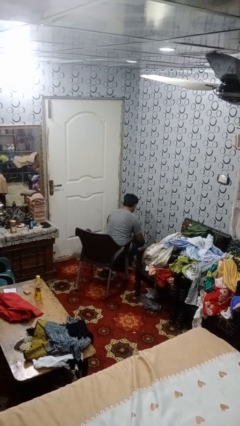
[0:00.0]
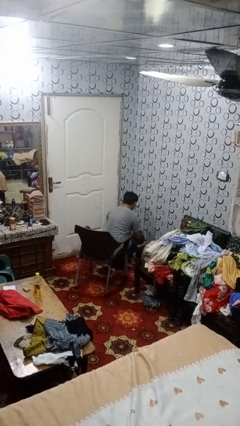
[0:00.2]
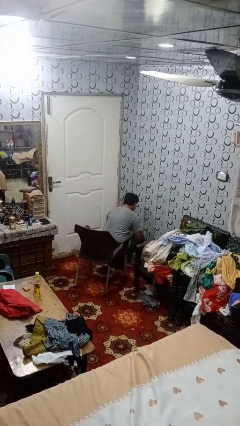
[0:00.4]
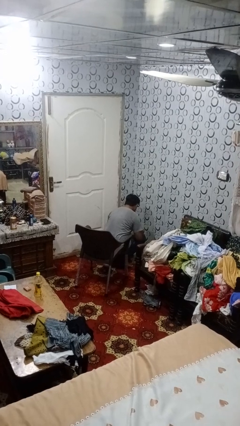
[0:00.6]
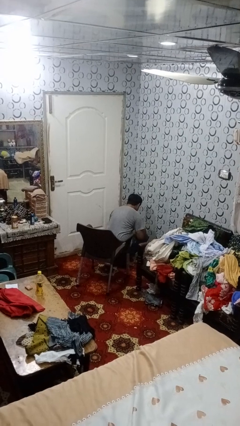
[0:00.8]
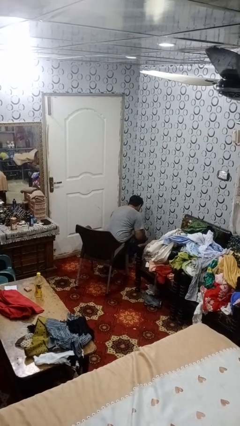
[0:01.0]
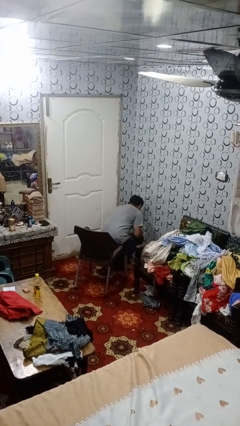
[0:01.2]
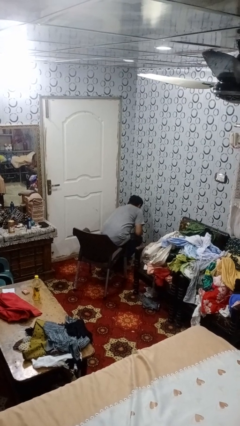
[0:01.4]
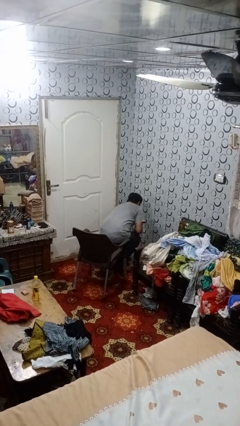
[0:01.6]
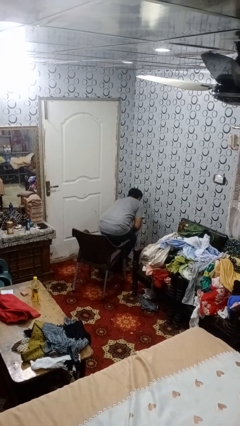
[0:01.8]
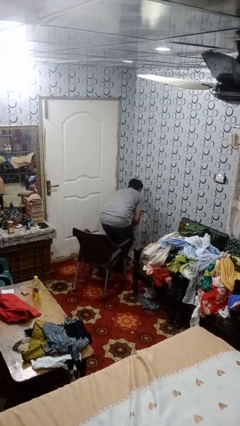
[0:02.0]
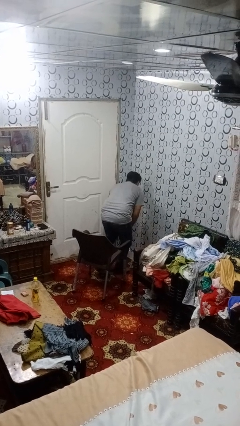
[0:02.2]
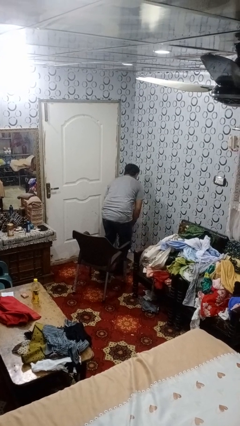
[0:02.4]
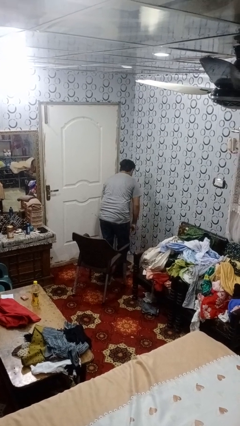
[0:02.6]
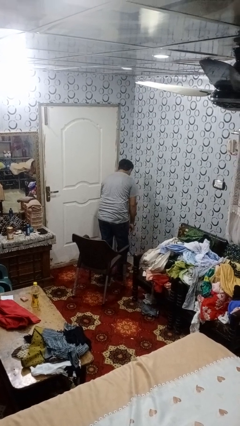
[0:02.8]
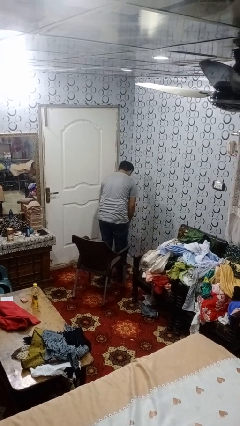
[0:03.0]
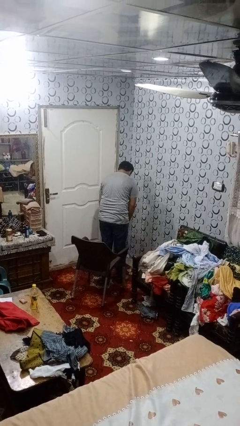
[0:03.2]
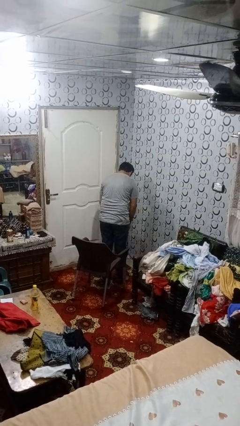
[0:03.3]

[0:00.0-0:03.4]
person stands up from floor

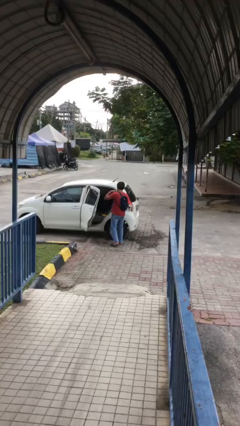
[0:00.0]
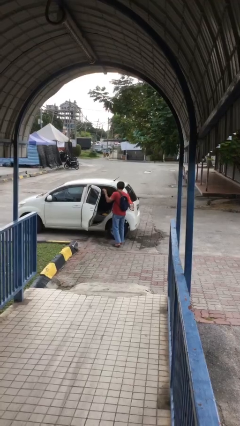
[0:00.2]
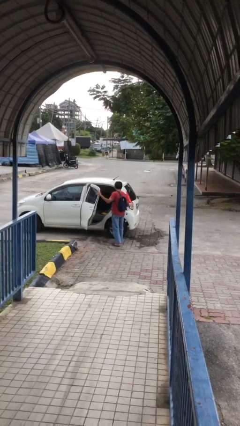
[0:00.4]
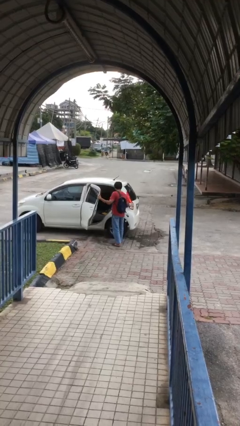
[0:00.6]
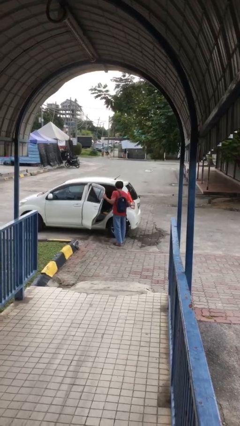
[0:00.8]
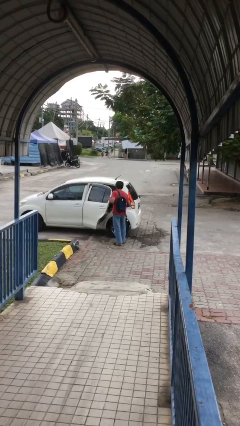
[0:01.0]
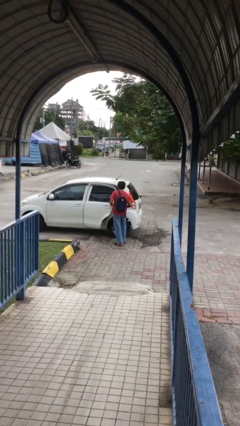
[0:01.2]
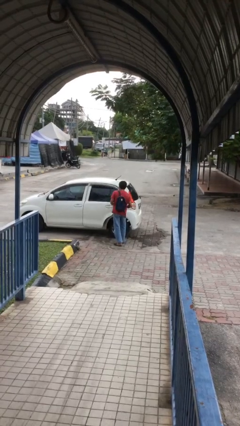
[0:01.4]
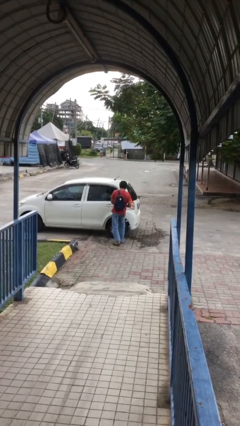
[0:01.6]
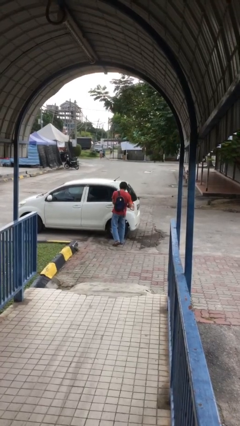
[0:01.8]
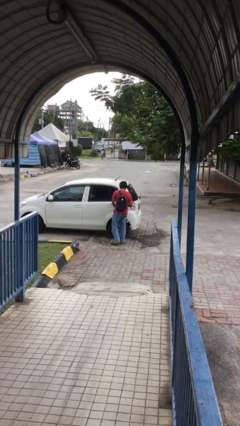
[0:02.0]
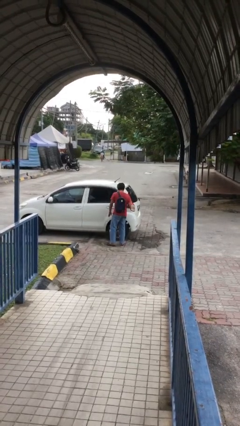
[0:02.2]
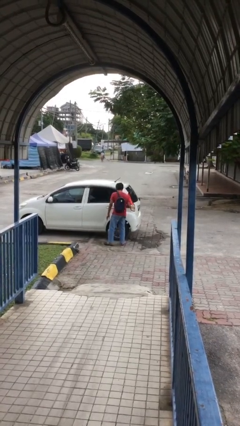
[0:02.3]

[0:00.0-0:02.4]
person closes car door

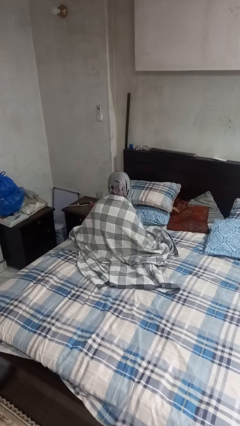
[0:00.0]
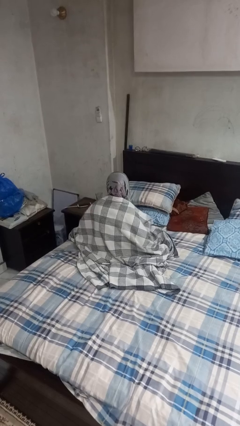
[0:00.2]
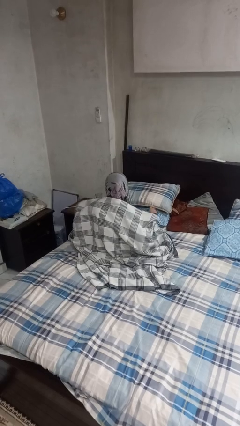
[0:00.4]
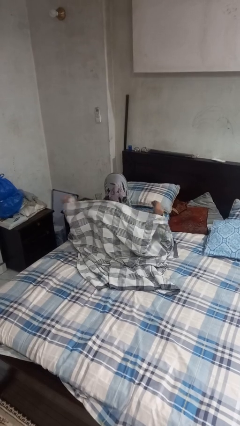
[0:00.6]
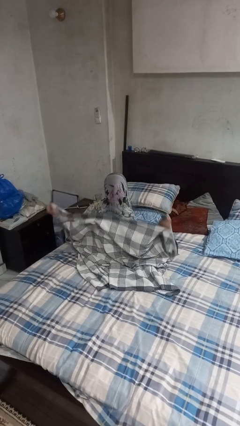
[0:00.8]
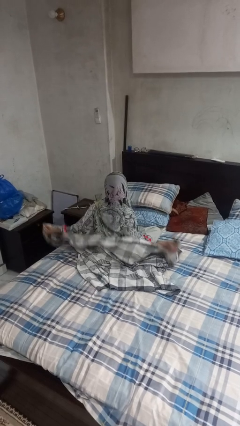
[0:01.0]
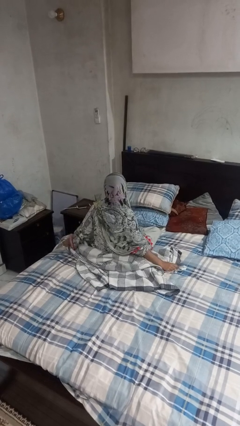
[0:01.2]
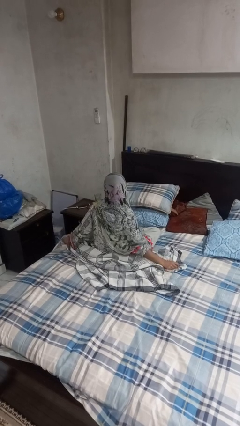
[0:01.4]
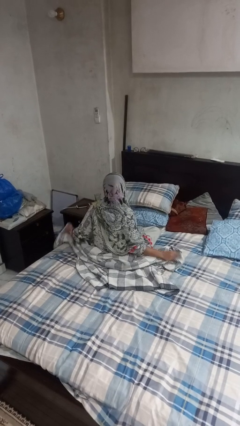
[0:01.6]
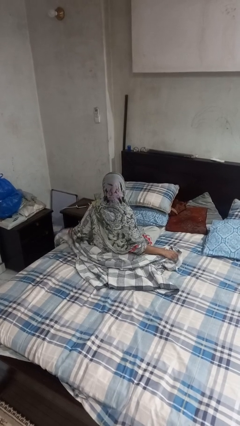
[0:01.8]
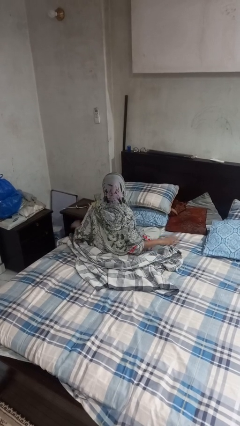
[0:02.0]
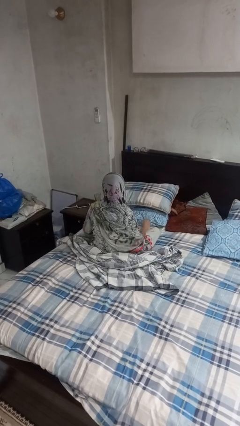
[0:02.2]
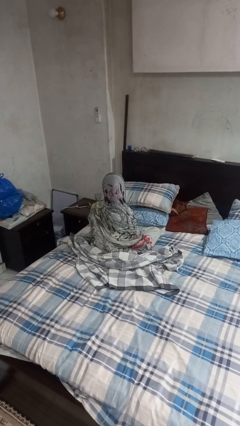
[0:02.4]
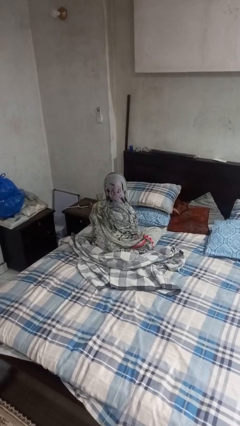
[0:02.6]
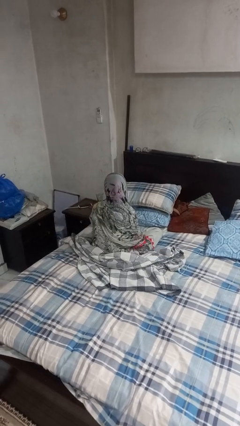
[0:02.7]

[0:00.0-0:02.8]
person uncovers with blanket

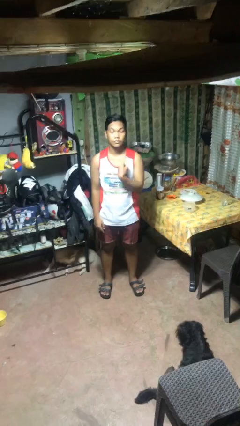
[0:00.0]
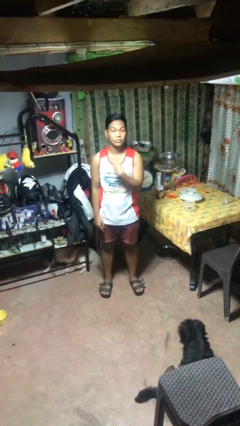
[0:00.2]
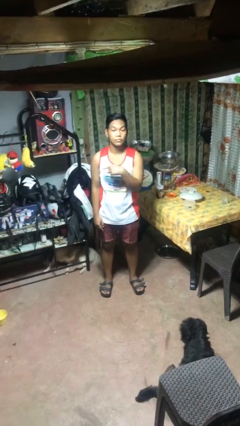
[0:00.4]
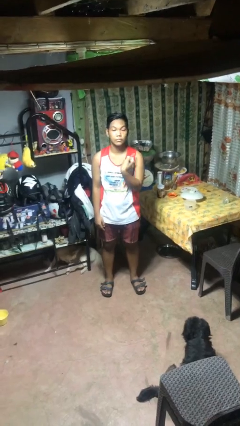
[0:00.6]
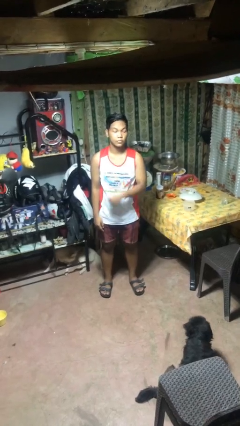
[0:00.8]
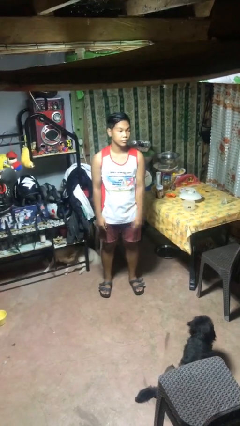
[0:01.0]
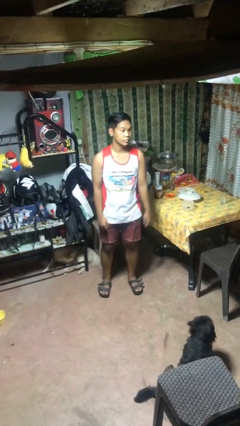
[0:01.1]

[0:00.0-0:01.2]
person gestures cut

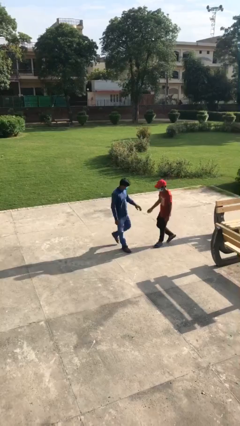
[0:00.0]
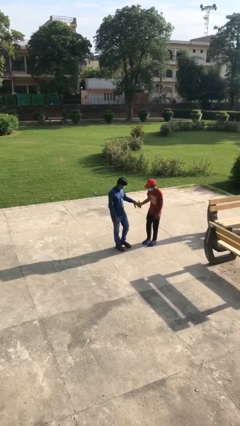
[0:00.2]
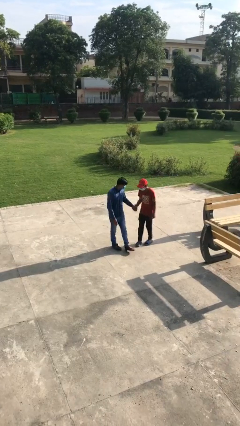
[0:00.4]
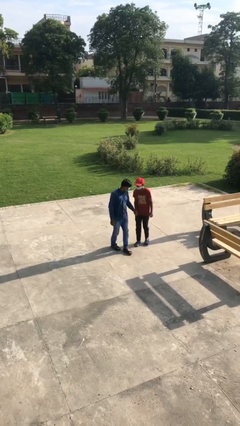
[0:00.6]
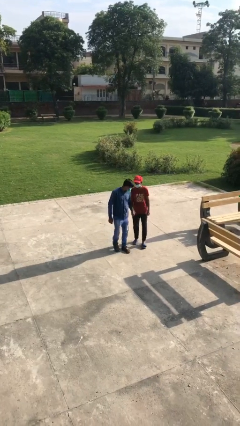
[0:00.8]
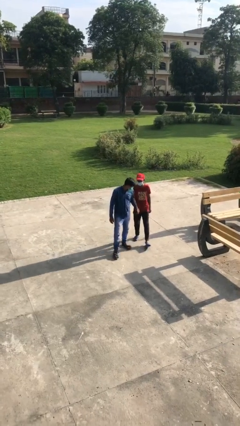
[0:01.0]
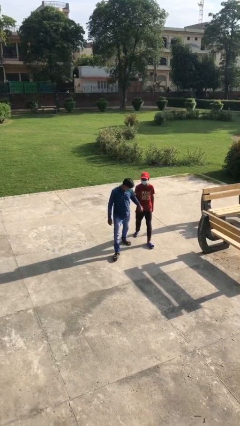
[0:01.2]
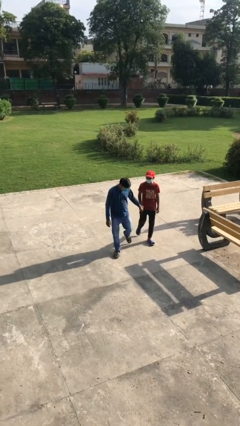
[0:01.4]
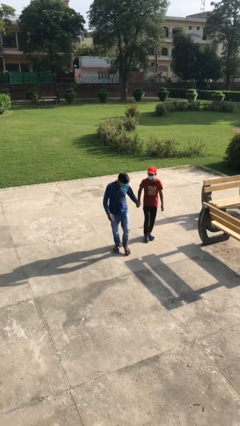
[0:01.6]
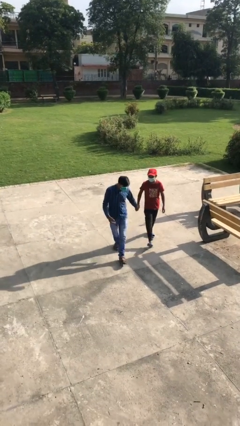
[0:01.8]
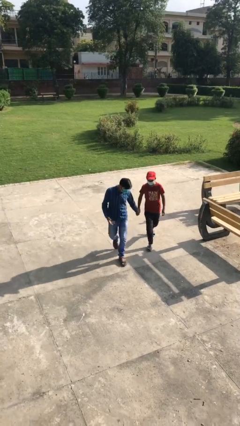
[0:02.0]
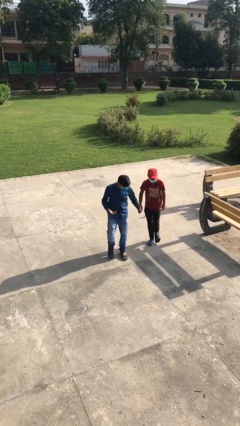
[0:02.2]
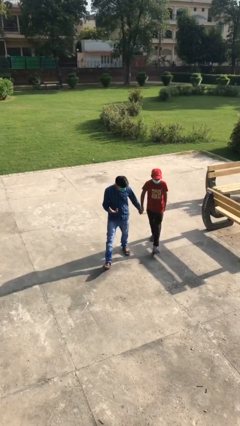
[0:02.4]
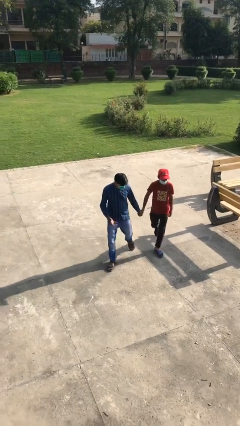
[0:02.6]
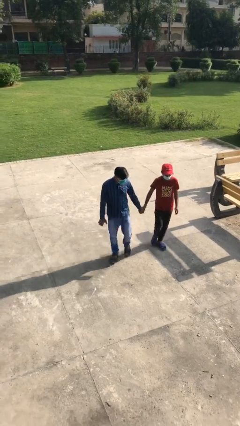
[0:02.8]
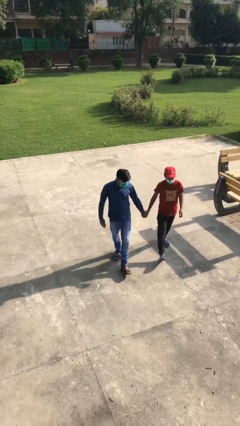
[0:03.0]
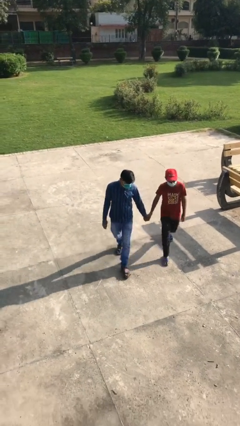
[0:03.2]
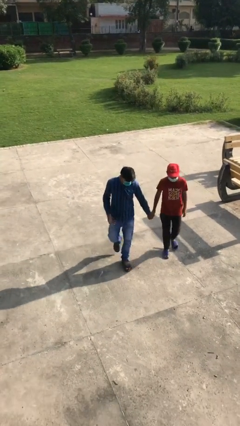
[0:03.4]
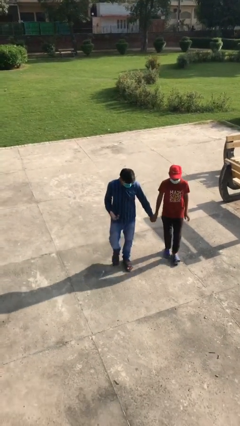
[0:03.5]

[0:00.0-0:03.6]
person holds hand

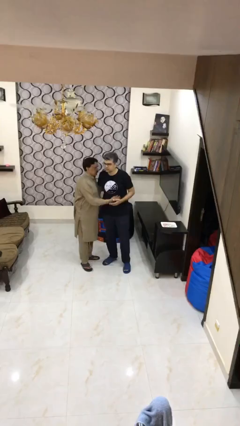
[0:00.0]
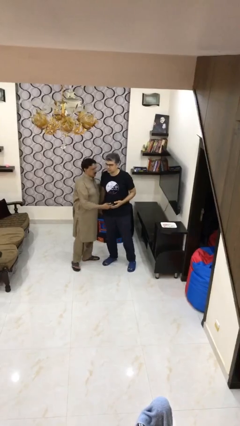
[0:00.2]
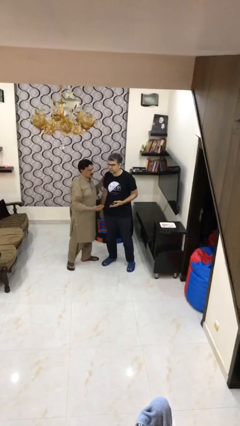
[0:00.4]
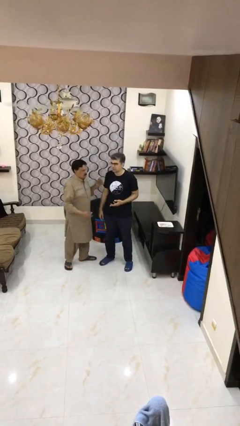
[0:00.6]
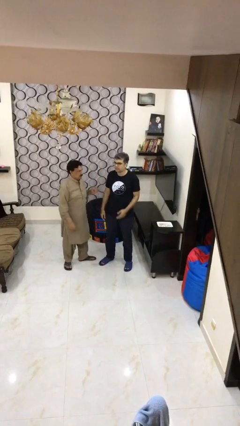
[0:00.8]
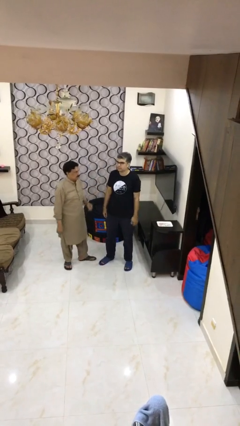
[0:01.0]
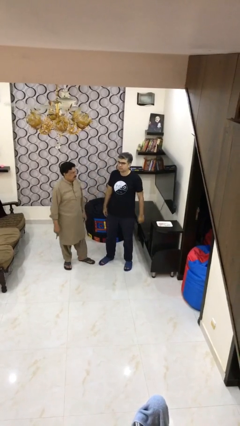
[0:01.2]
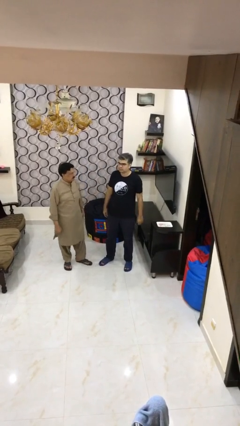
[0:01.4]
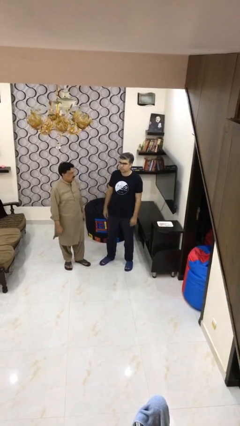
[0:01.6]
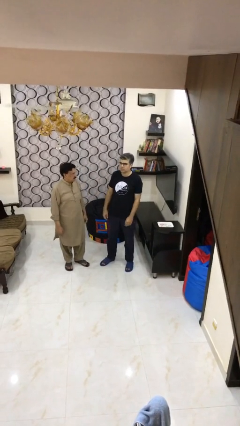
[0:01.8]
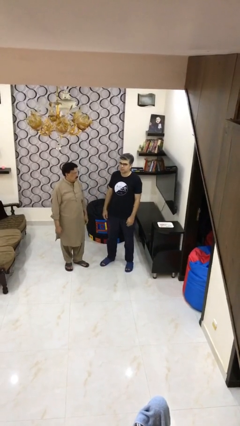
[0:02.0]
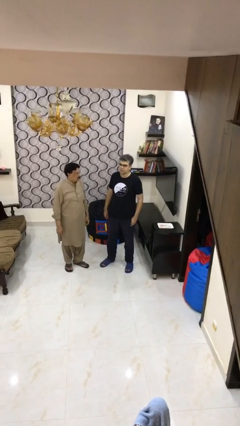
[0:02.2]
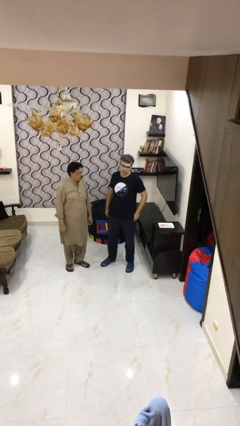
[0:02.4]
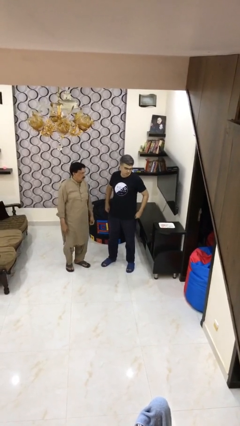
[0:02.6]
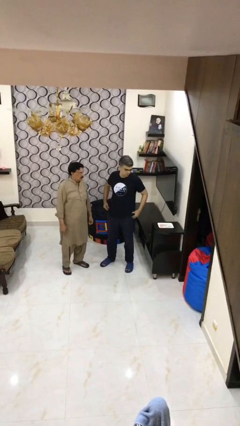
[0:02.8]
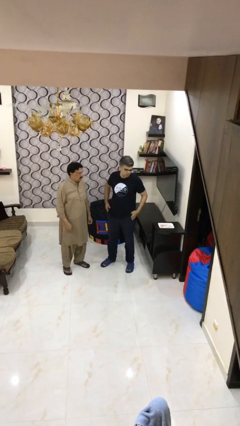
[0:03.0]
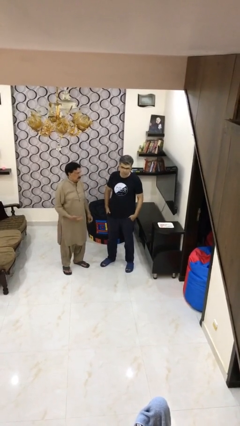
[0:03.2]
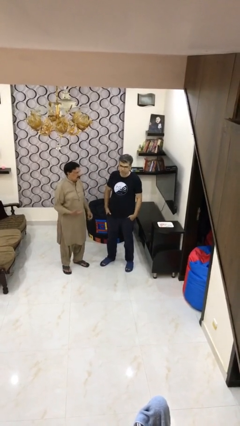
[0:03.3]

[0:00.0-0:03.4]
person talks to person

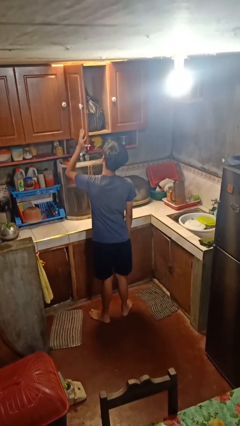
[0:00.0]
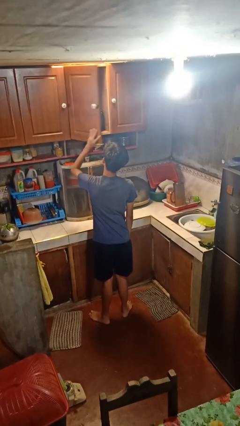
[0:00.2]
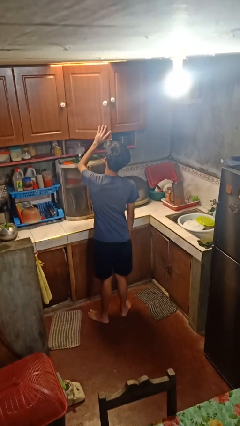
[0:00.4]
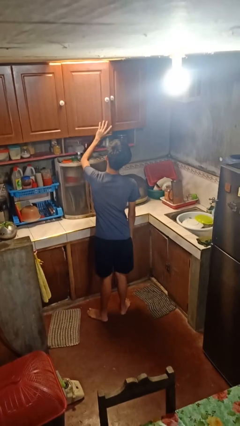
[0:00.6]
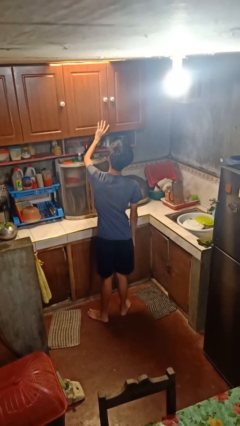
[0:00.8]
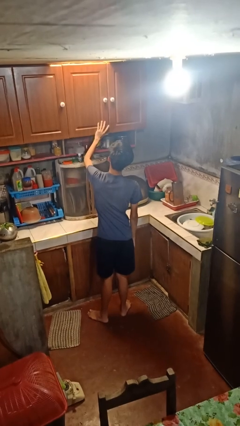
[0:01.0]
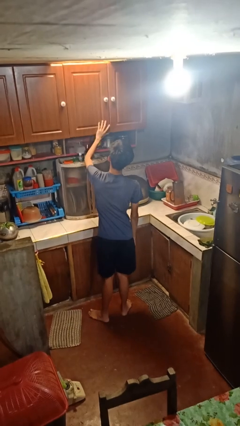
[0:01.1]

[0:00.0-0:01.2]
person closes cabinet
